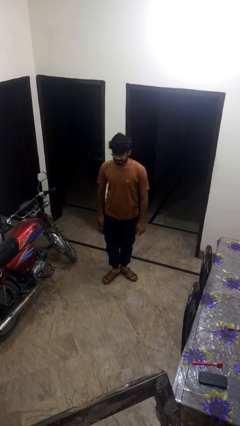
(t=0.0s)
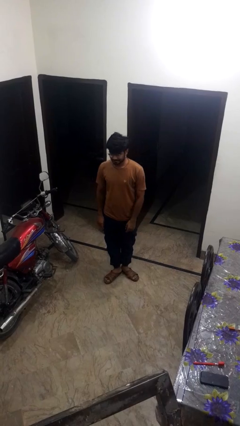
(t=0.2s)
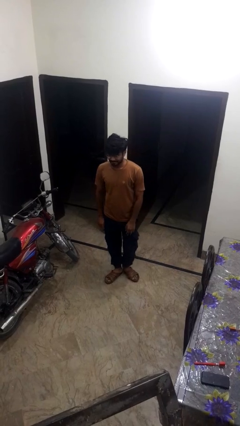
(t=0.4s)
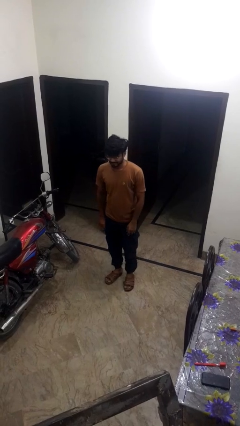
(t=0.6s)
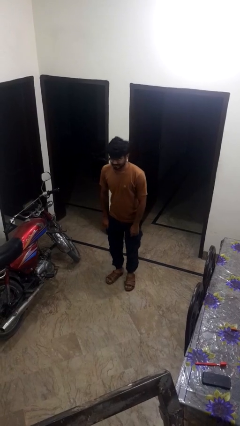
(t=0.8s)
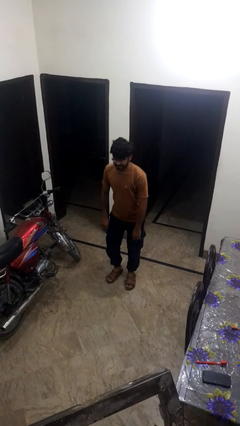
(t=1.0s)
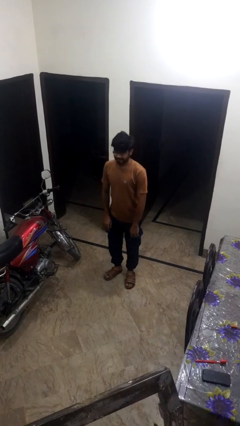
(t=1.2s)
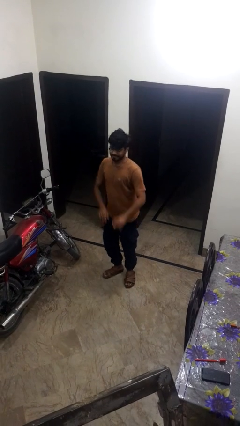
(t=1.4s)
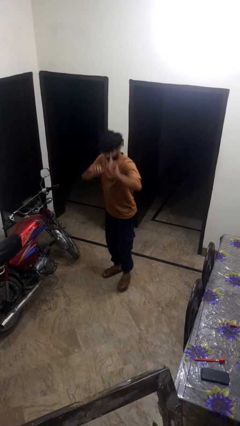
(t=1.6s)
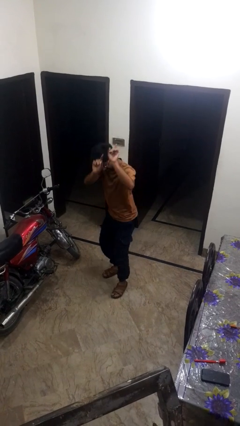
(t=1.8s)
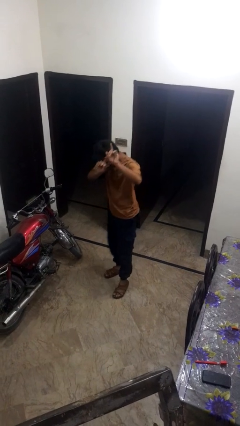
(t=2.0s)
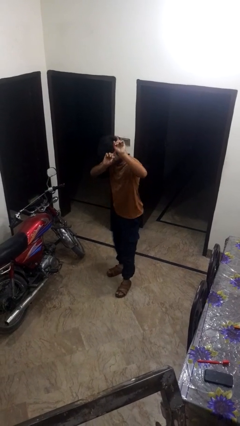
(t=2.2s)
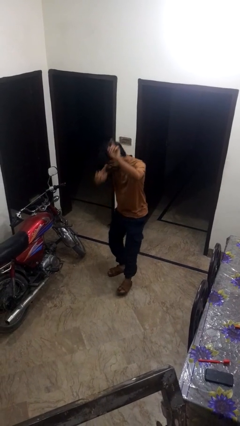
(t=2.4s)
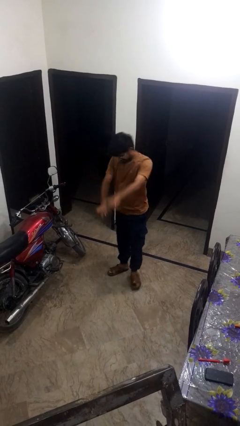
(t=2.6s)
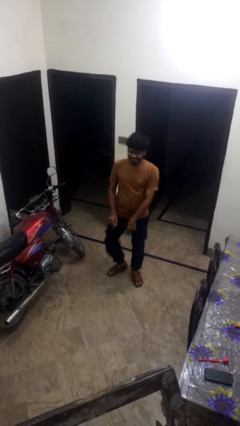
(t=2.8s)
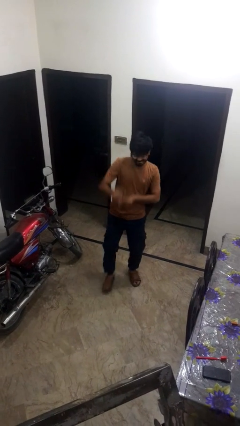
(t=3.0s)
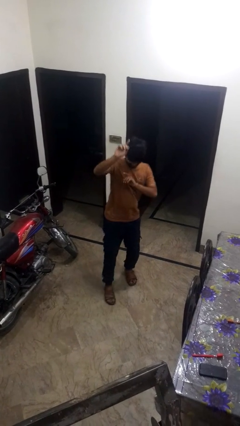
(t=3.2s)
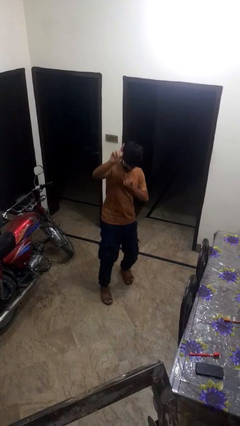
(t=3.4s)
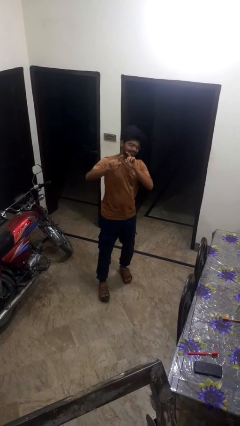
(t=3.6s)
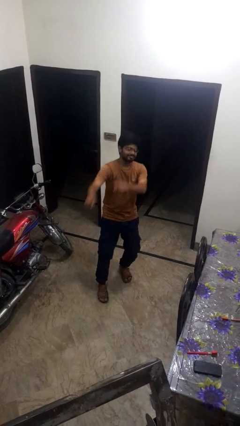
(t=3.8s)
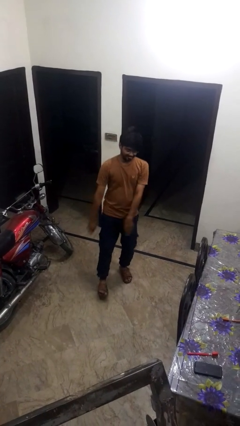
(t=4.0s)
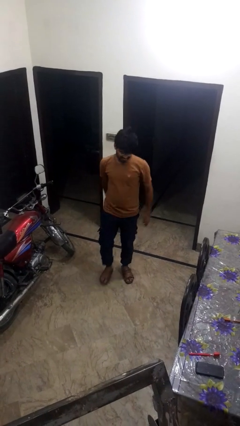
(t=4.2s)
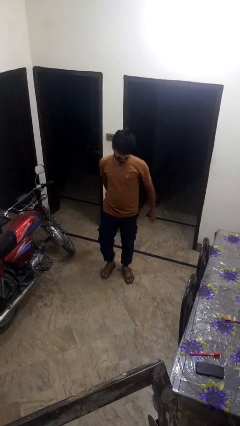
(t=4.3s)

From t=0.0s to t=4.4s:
person dances in place

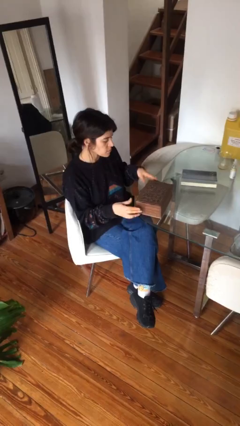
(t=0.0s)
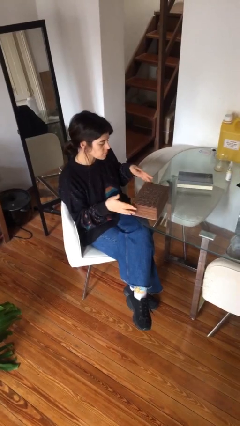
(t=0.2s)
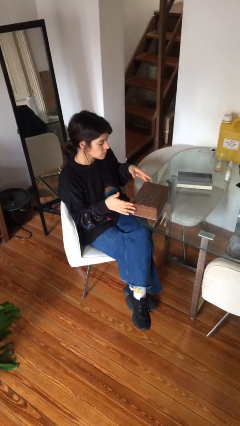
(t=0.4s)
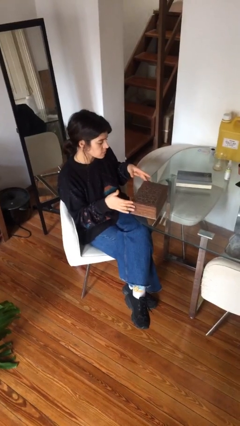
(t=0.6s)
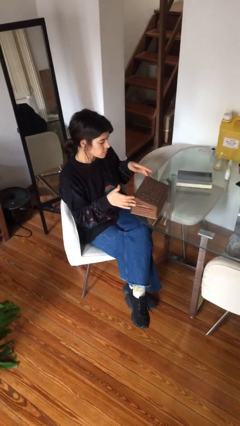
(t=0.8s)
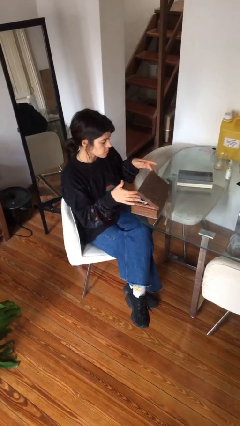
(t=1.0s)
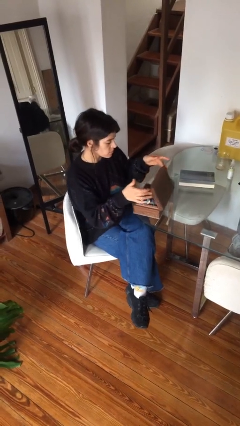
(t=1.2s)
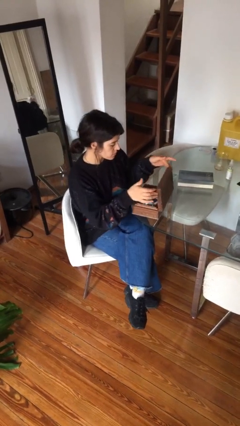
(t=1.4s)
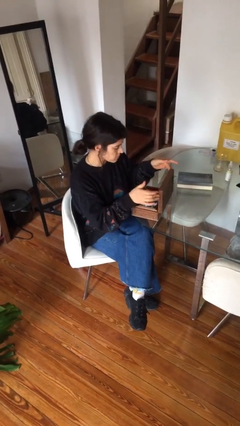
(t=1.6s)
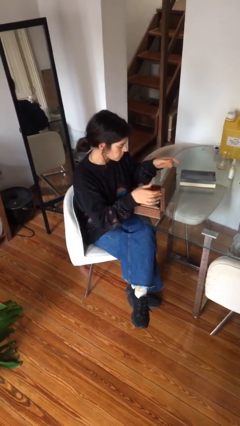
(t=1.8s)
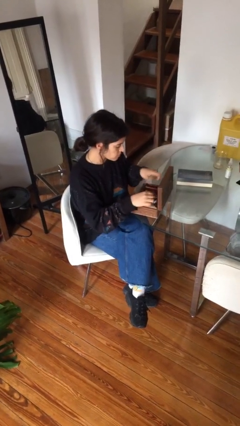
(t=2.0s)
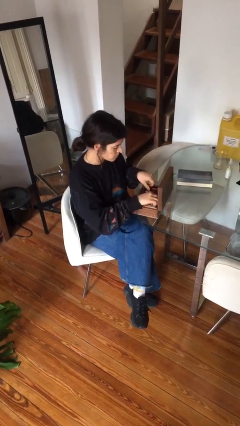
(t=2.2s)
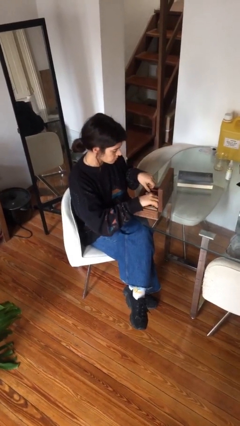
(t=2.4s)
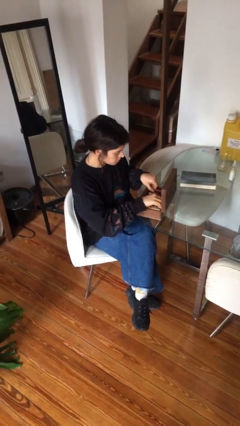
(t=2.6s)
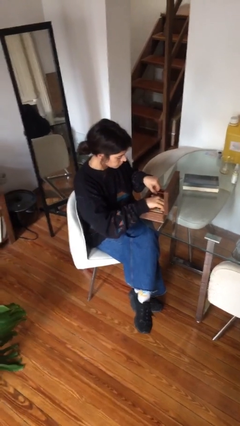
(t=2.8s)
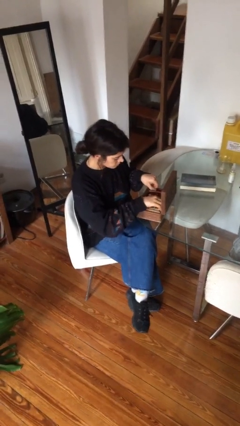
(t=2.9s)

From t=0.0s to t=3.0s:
person opens jewelry box

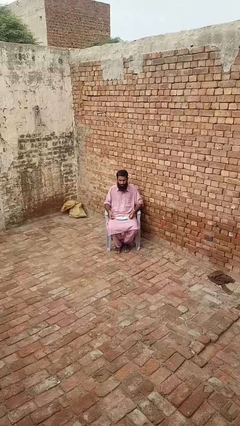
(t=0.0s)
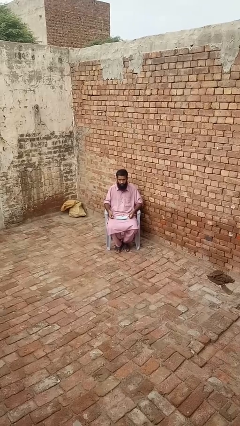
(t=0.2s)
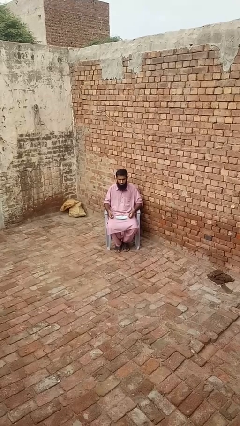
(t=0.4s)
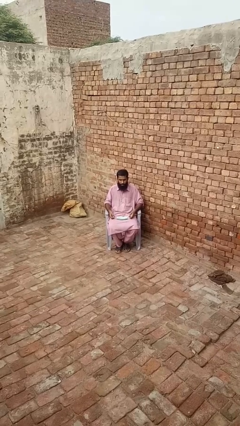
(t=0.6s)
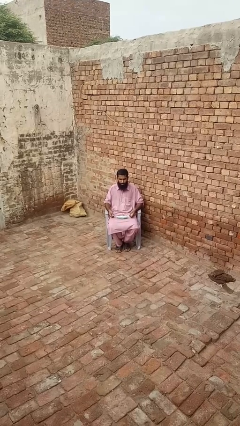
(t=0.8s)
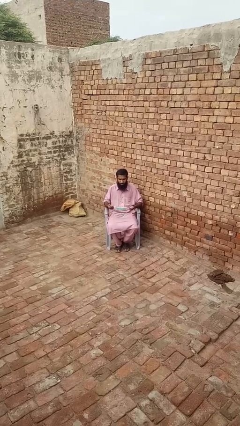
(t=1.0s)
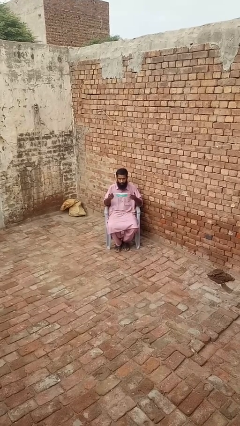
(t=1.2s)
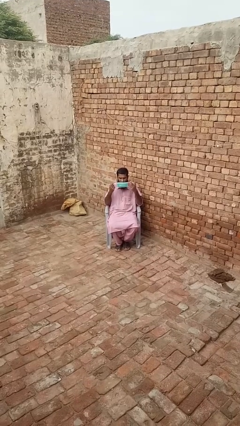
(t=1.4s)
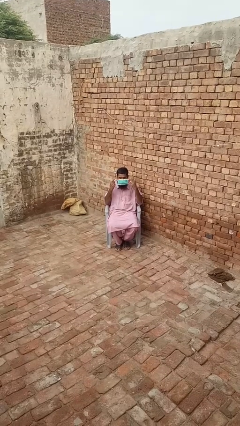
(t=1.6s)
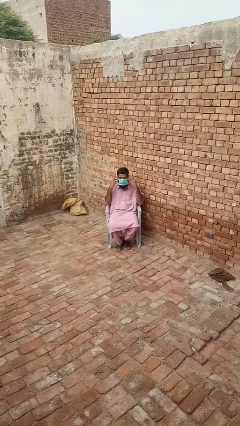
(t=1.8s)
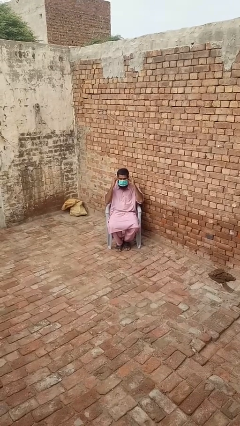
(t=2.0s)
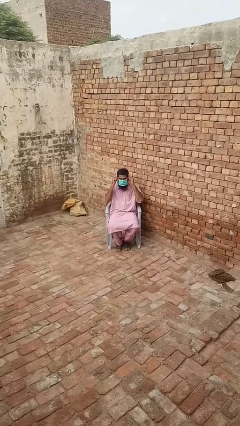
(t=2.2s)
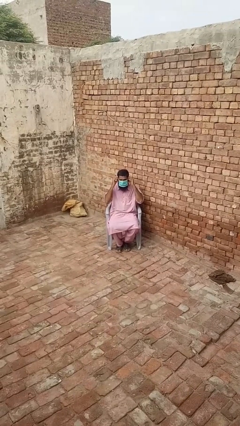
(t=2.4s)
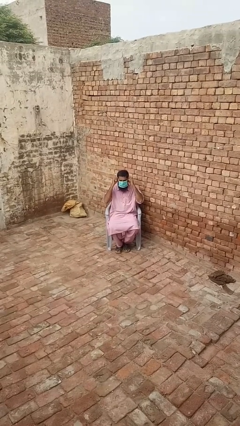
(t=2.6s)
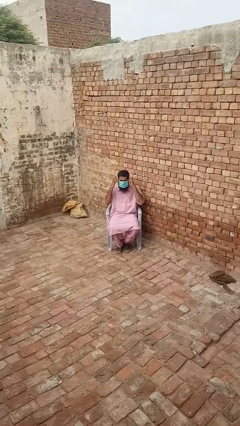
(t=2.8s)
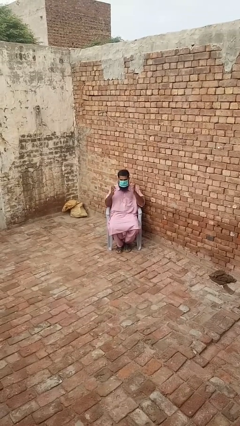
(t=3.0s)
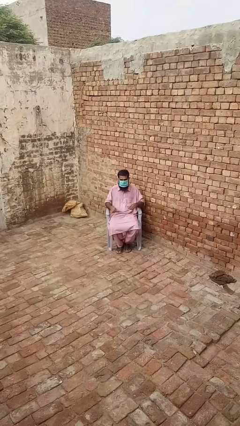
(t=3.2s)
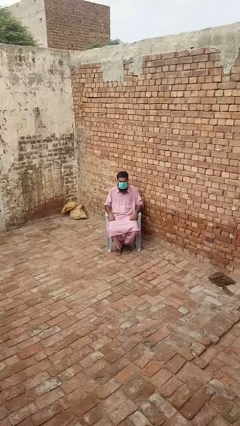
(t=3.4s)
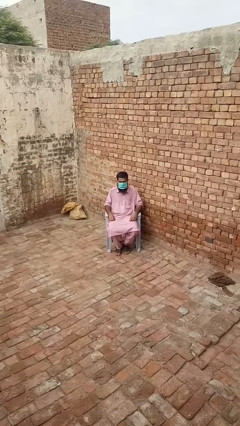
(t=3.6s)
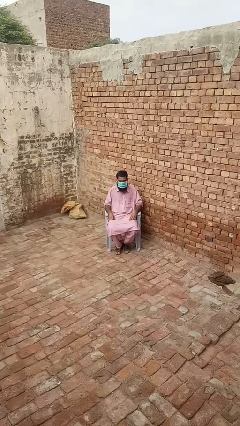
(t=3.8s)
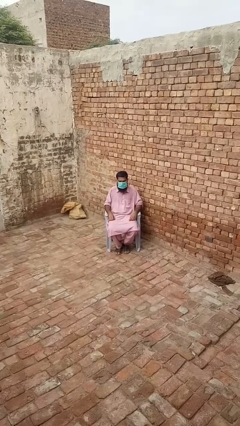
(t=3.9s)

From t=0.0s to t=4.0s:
person puts on facemask

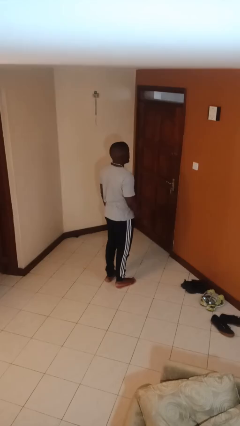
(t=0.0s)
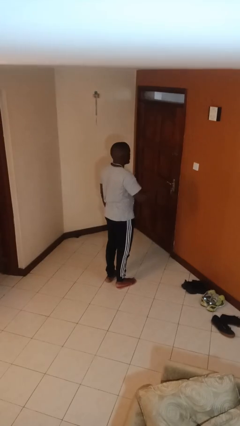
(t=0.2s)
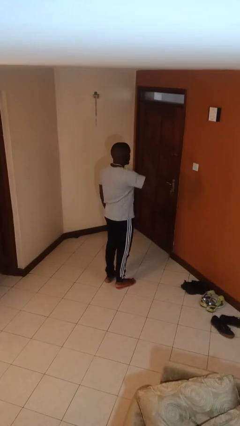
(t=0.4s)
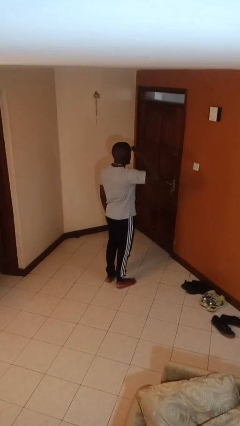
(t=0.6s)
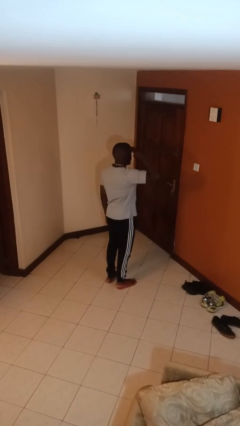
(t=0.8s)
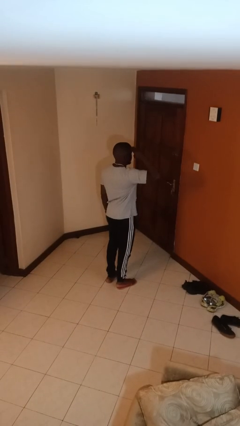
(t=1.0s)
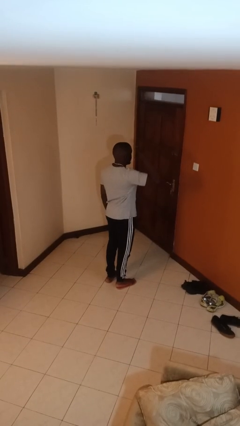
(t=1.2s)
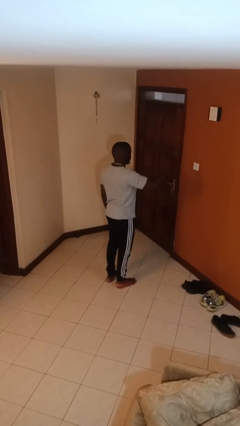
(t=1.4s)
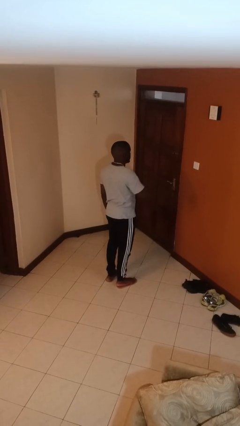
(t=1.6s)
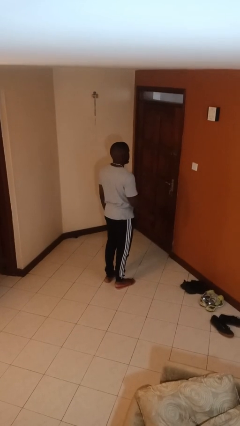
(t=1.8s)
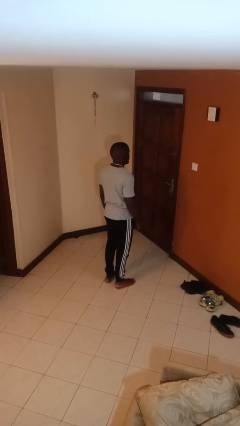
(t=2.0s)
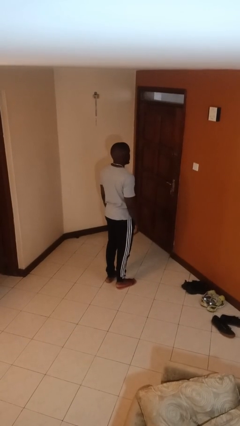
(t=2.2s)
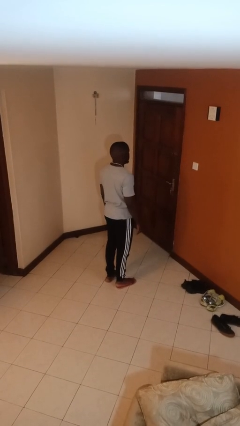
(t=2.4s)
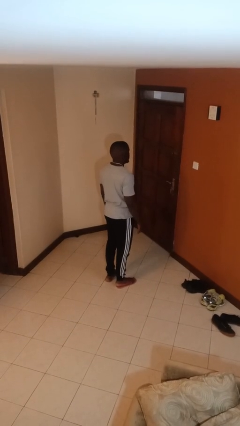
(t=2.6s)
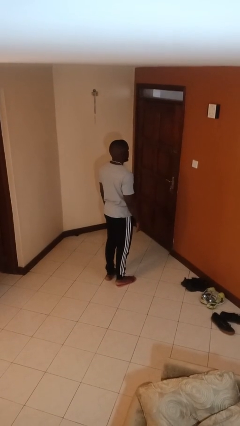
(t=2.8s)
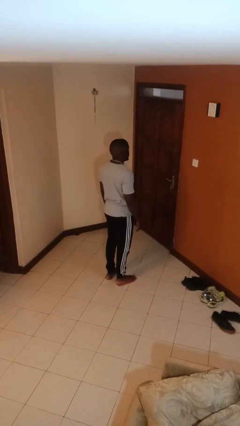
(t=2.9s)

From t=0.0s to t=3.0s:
person salutes

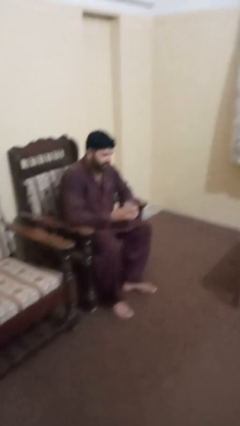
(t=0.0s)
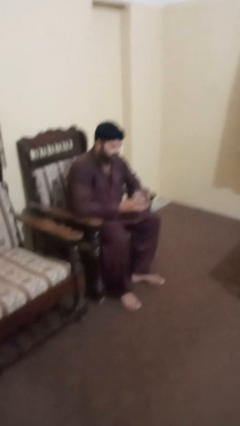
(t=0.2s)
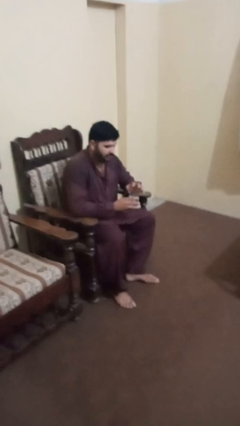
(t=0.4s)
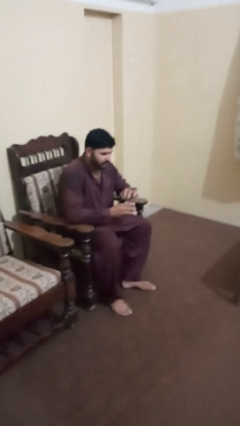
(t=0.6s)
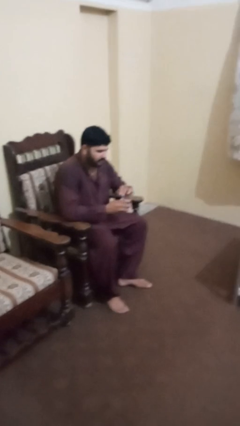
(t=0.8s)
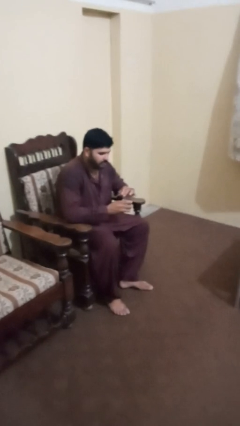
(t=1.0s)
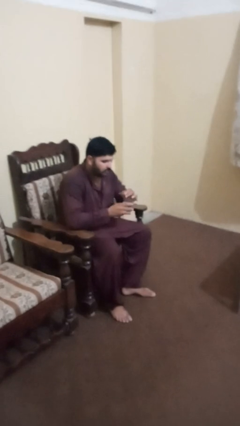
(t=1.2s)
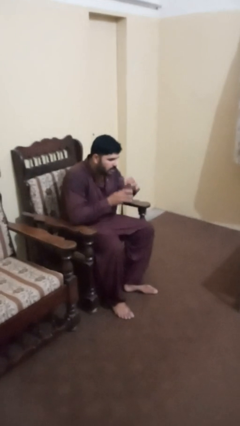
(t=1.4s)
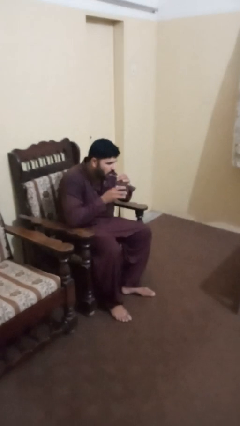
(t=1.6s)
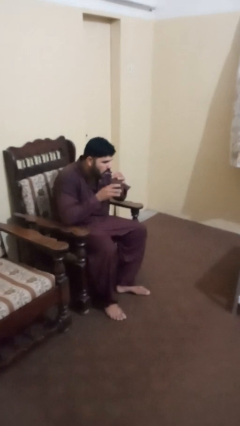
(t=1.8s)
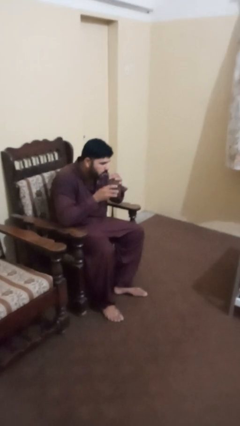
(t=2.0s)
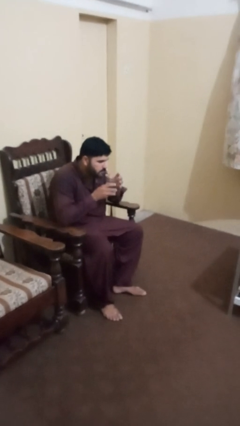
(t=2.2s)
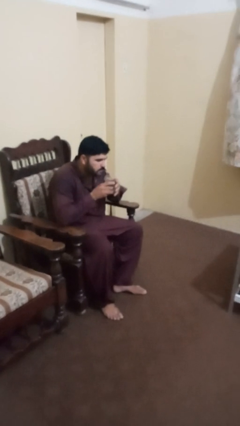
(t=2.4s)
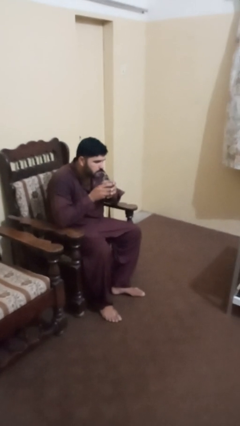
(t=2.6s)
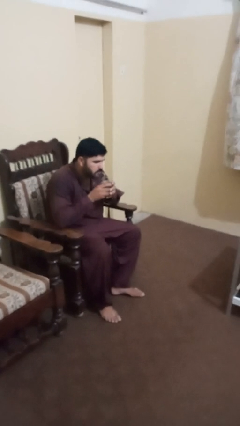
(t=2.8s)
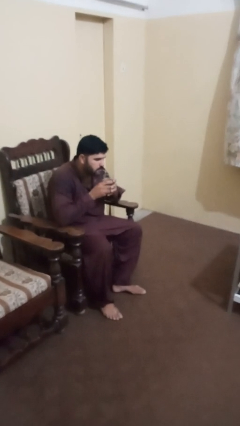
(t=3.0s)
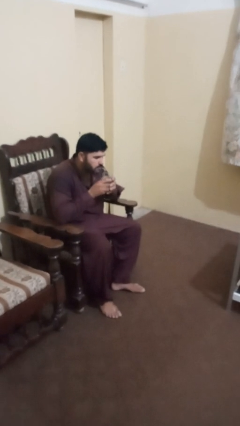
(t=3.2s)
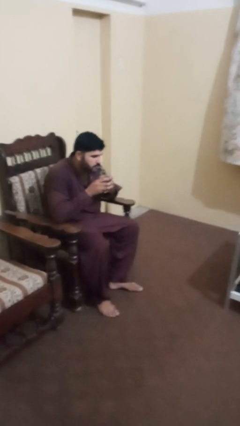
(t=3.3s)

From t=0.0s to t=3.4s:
person drinks from straw
